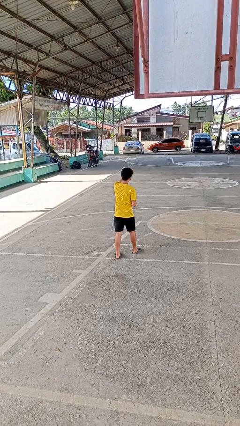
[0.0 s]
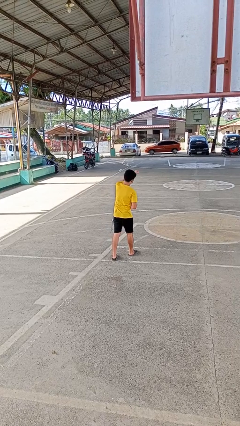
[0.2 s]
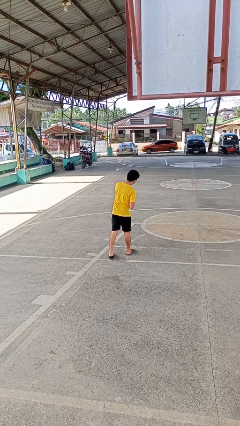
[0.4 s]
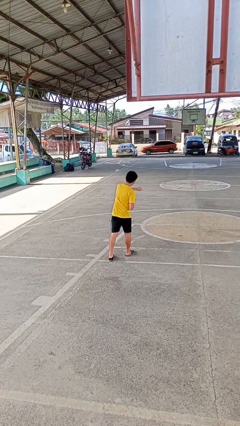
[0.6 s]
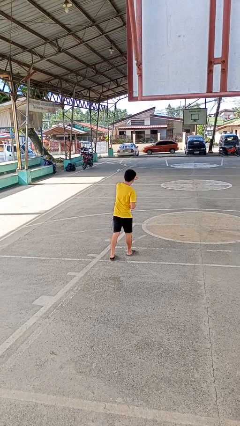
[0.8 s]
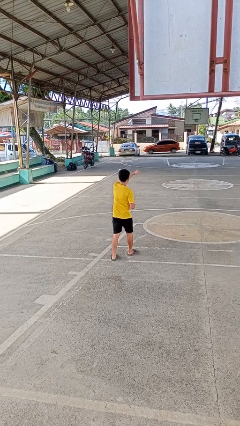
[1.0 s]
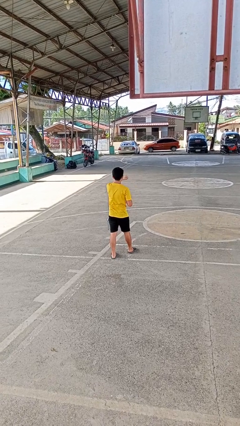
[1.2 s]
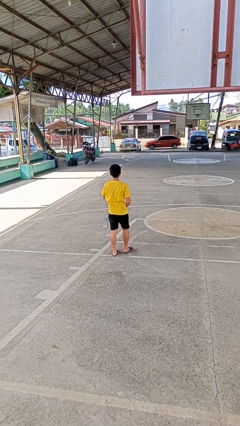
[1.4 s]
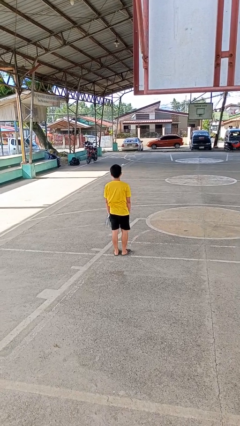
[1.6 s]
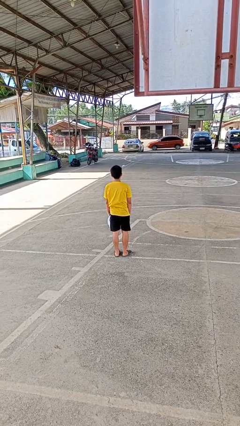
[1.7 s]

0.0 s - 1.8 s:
person punches

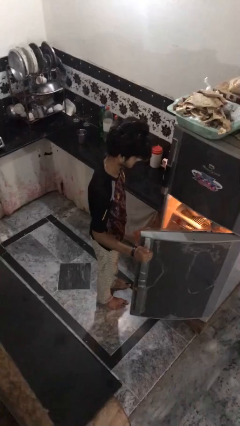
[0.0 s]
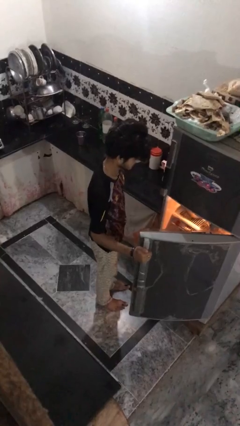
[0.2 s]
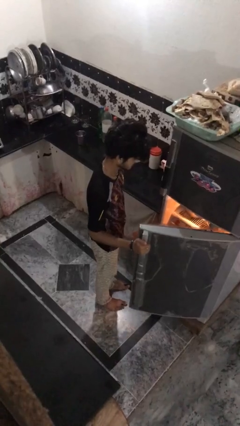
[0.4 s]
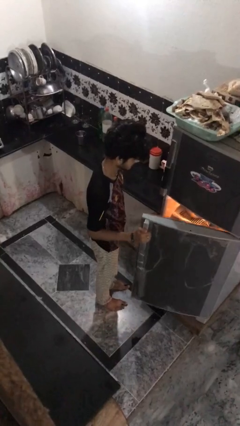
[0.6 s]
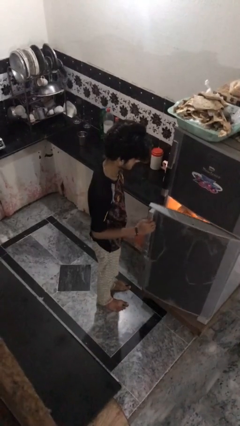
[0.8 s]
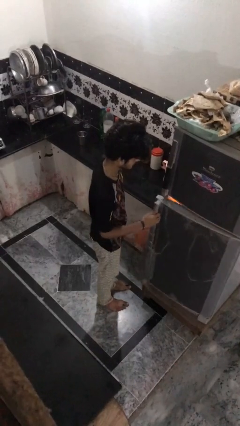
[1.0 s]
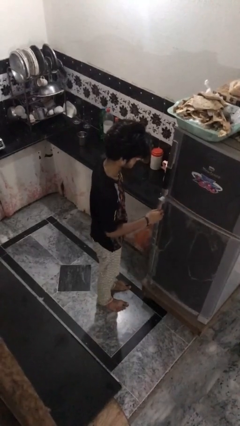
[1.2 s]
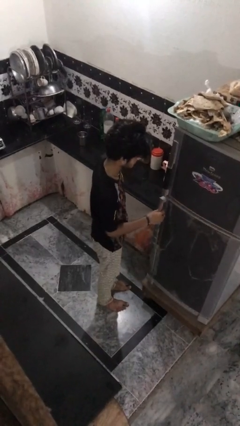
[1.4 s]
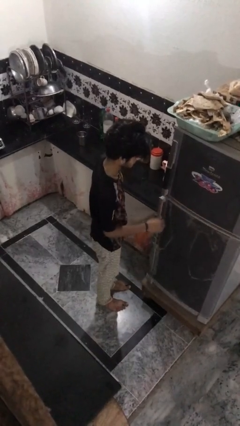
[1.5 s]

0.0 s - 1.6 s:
person closes refrigerator

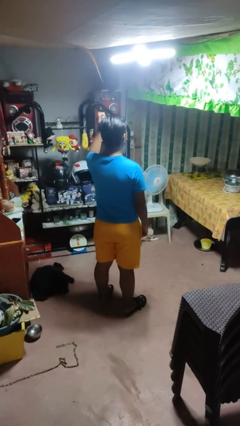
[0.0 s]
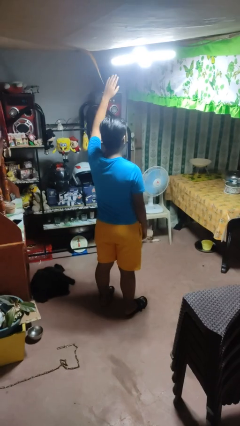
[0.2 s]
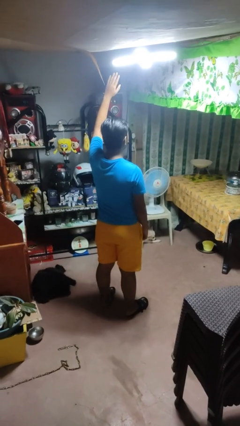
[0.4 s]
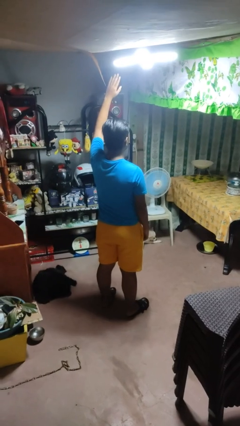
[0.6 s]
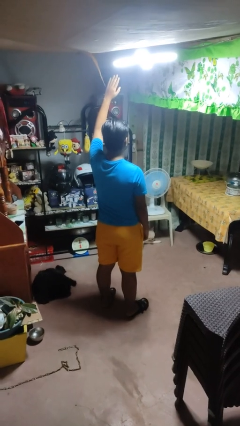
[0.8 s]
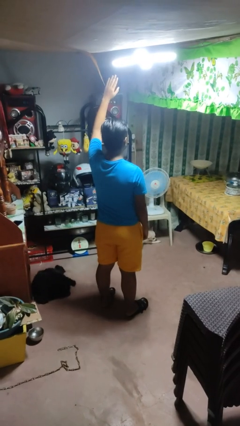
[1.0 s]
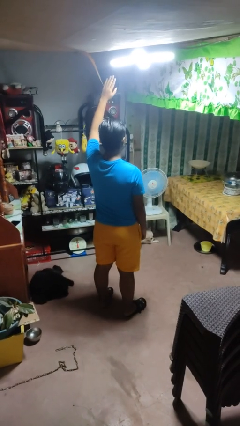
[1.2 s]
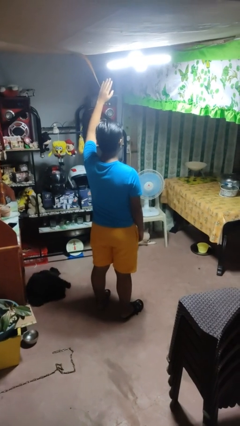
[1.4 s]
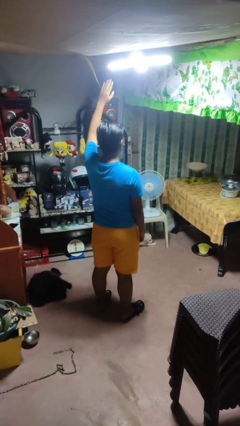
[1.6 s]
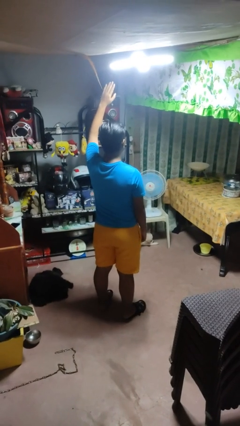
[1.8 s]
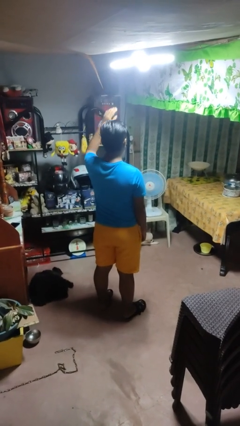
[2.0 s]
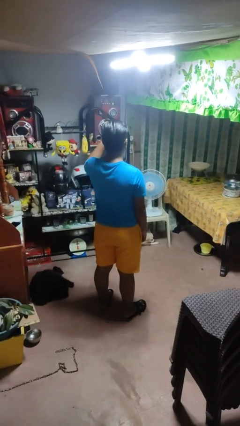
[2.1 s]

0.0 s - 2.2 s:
person gestures raise hand

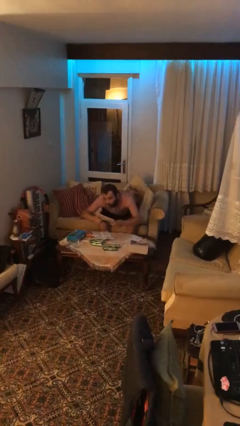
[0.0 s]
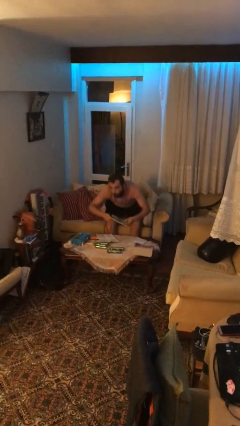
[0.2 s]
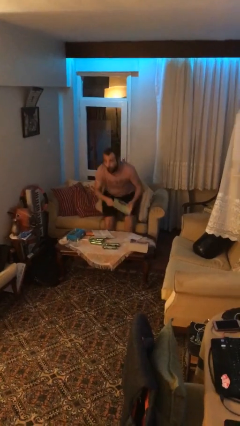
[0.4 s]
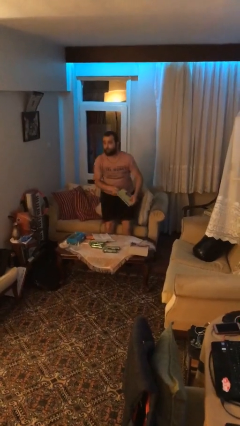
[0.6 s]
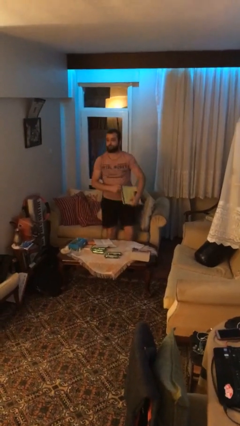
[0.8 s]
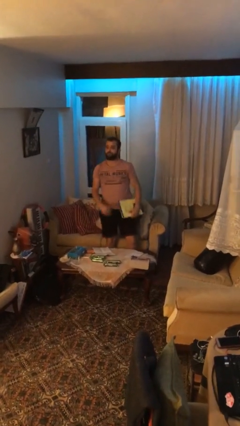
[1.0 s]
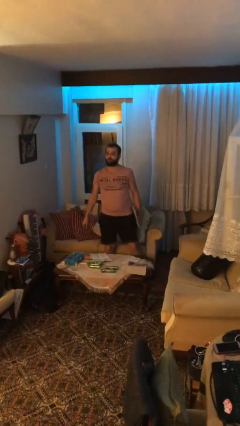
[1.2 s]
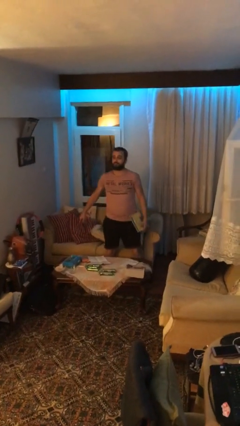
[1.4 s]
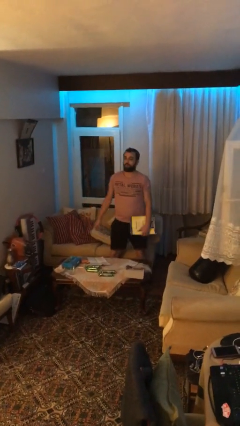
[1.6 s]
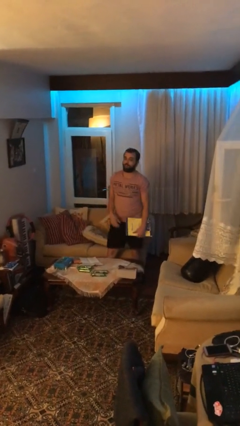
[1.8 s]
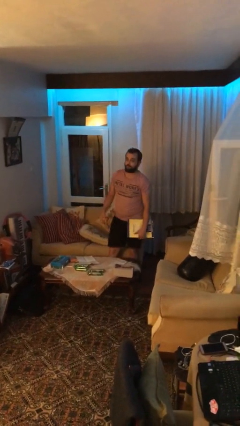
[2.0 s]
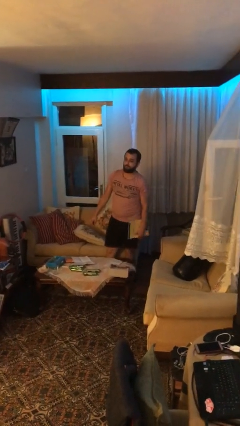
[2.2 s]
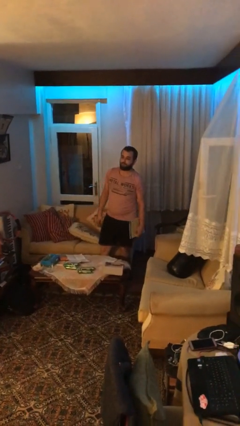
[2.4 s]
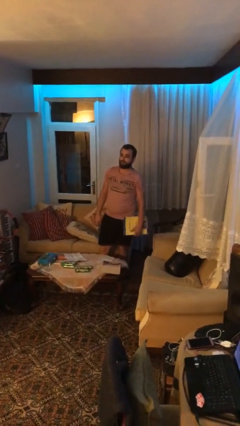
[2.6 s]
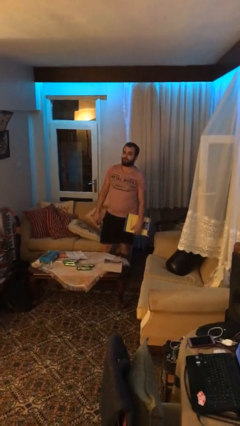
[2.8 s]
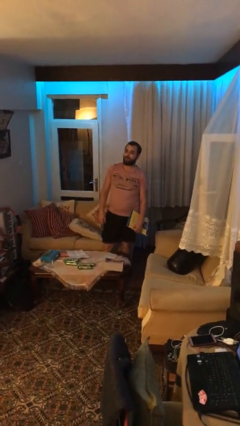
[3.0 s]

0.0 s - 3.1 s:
person stands up

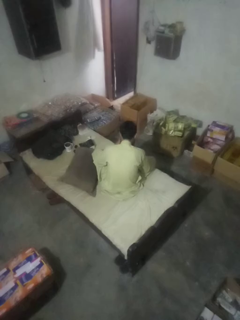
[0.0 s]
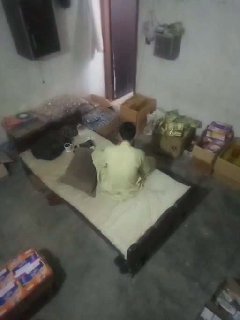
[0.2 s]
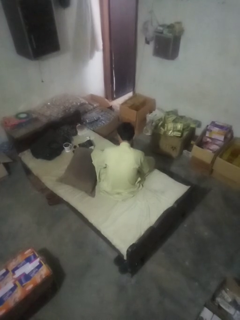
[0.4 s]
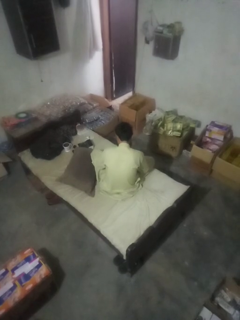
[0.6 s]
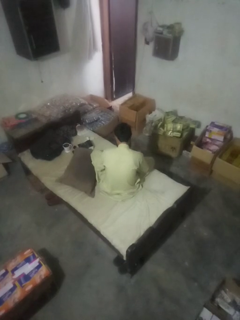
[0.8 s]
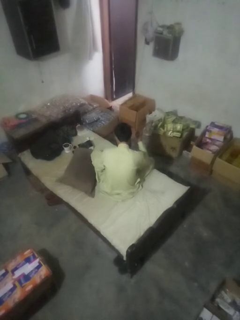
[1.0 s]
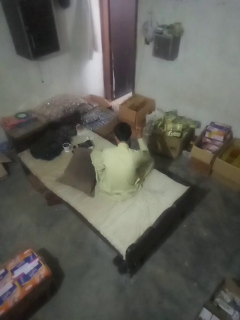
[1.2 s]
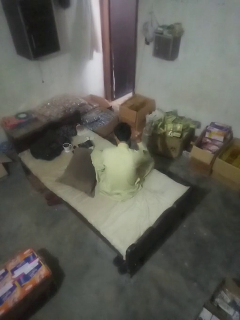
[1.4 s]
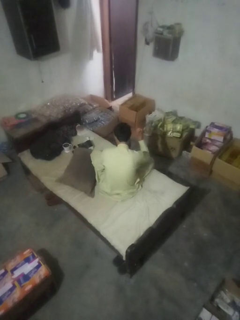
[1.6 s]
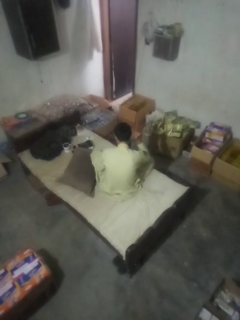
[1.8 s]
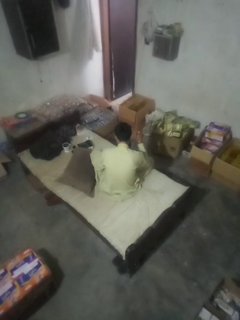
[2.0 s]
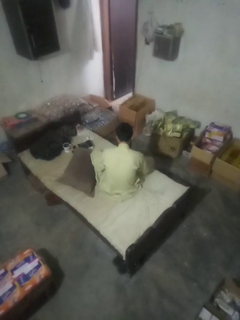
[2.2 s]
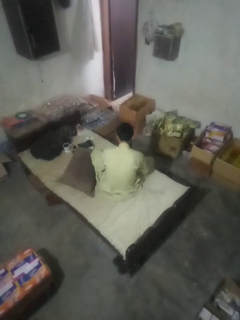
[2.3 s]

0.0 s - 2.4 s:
person gestures behind me

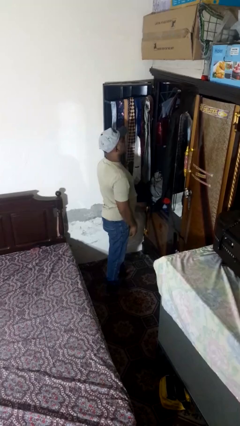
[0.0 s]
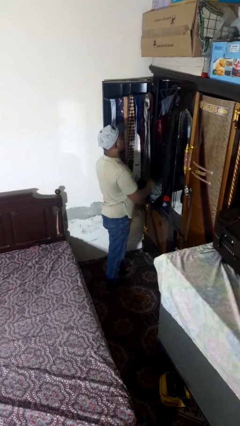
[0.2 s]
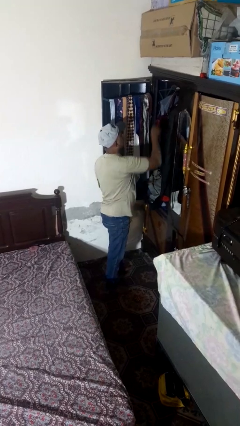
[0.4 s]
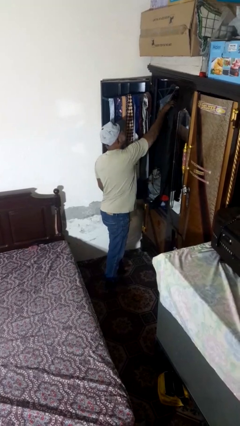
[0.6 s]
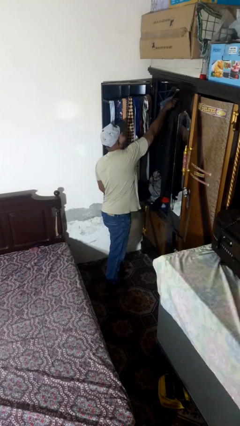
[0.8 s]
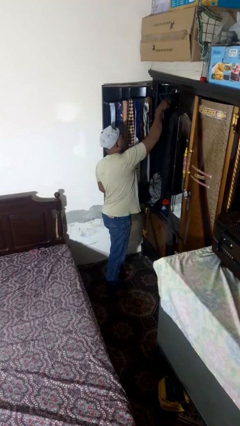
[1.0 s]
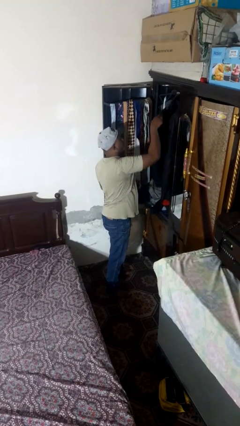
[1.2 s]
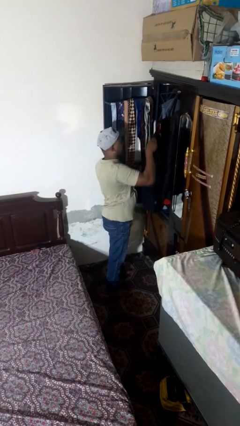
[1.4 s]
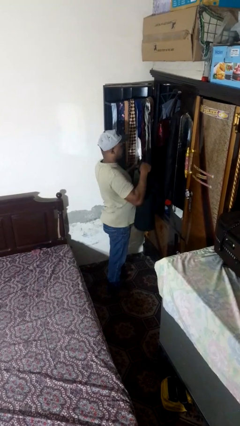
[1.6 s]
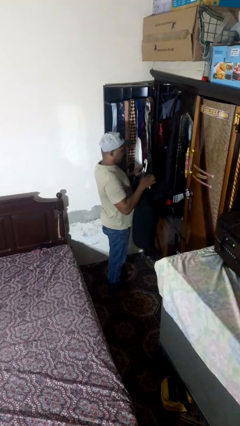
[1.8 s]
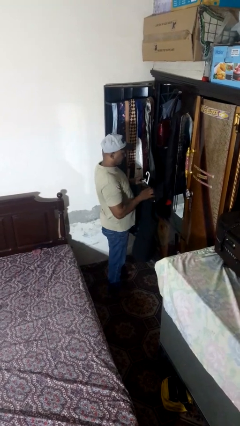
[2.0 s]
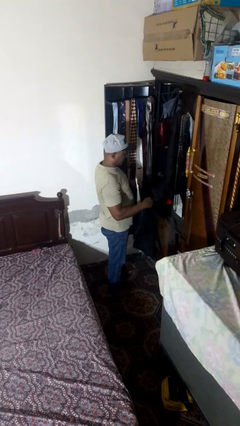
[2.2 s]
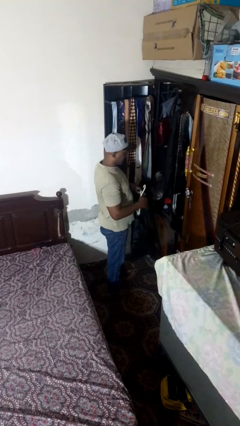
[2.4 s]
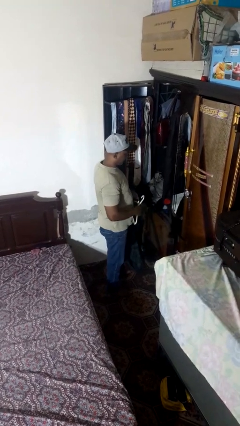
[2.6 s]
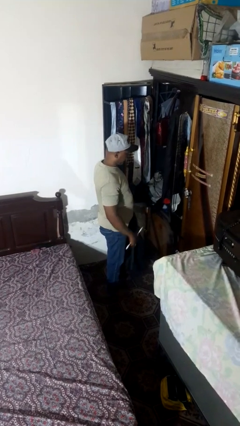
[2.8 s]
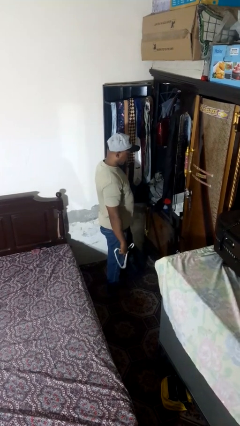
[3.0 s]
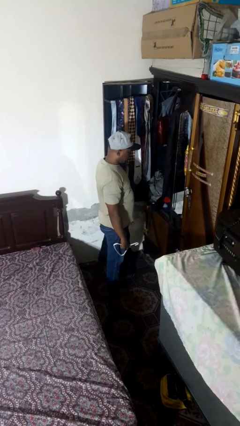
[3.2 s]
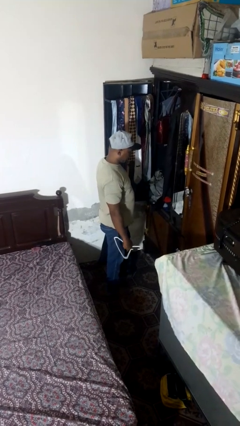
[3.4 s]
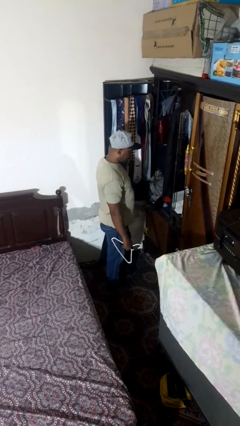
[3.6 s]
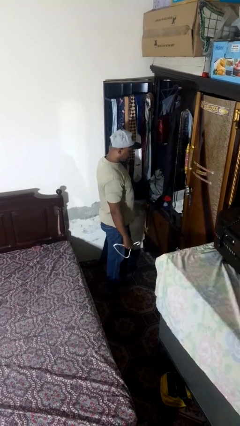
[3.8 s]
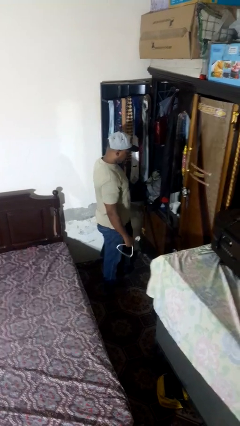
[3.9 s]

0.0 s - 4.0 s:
person takes clothes from closet

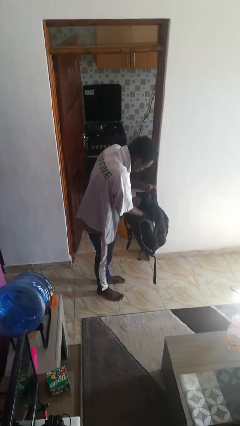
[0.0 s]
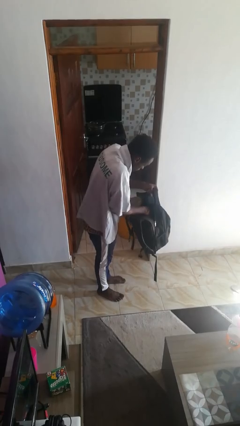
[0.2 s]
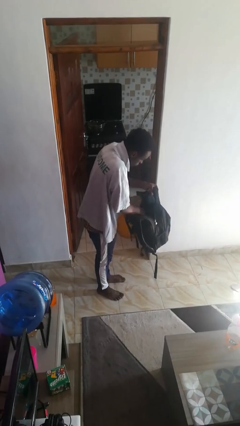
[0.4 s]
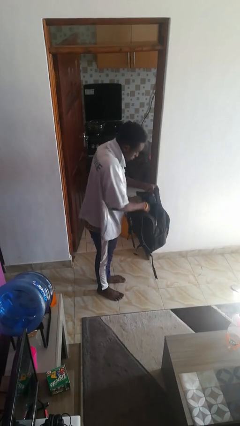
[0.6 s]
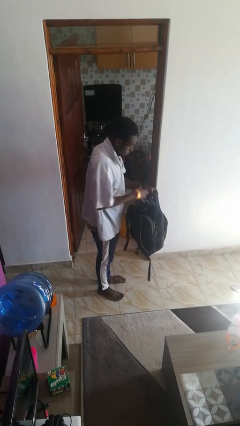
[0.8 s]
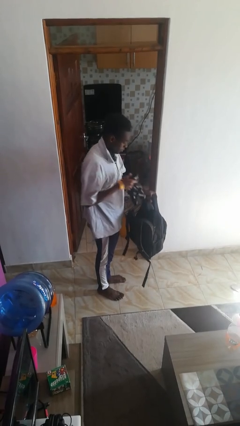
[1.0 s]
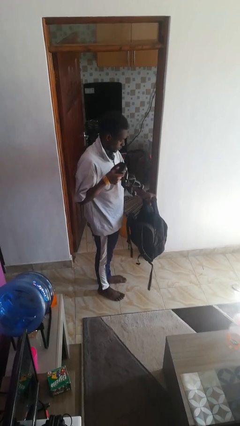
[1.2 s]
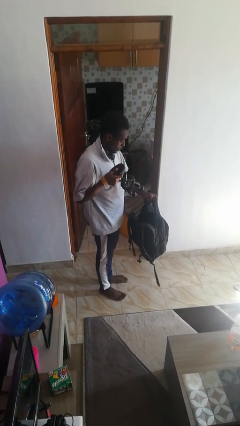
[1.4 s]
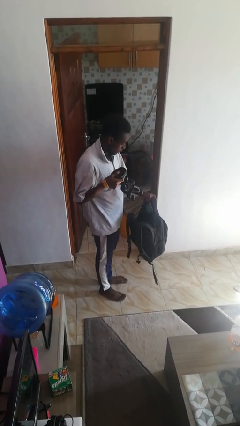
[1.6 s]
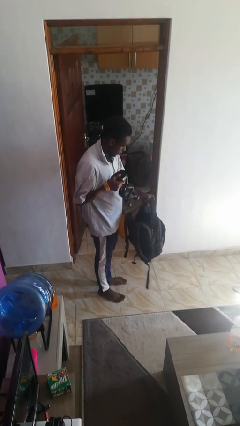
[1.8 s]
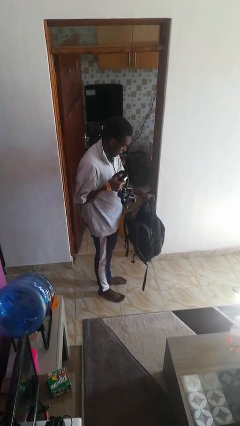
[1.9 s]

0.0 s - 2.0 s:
person takes object from backpack

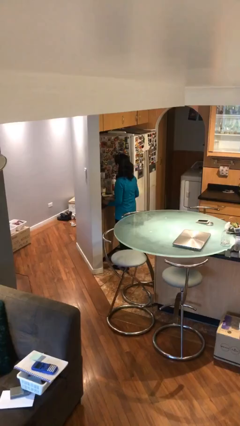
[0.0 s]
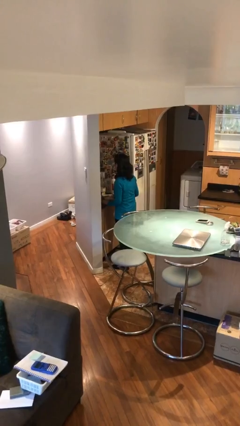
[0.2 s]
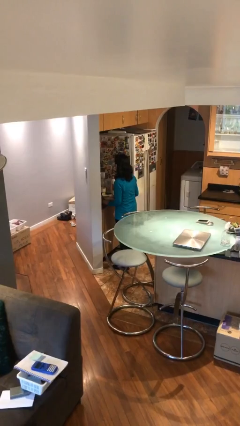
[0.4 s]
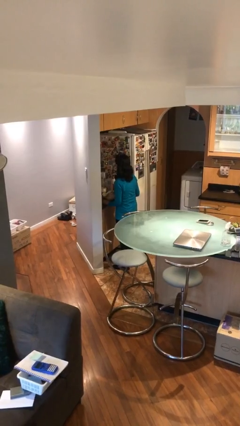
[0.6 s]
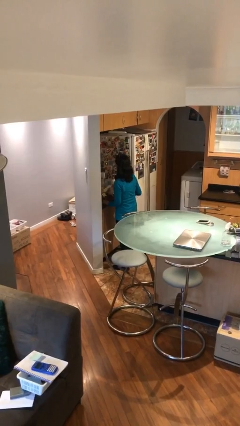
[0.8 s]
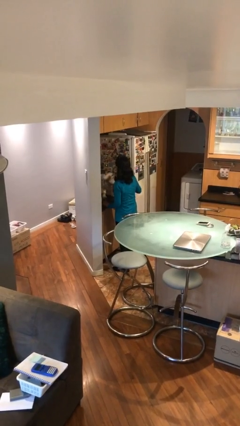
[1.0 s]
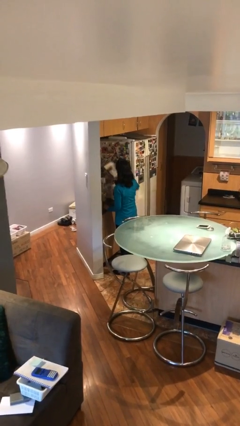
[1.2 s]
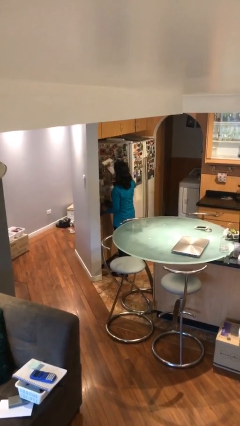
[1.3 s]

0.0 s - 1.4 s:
person picks up object from table
